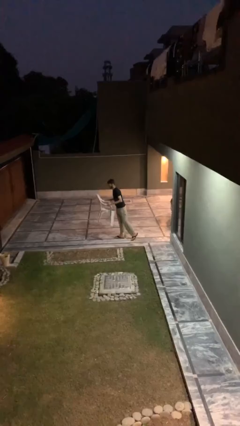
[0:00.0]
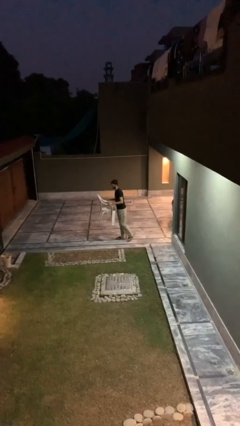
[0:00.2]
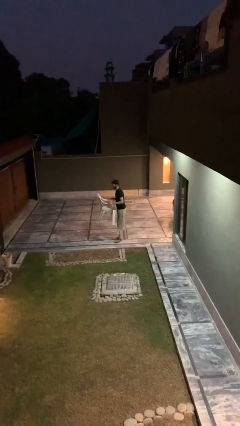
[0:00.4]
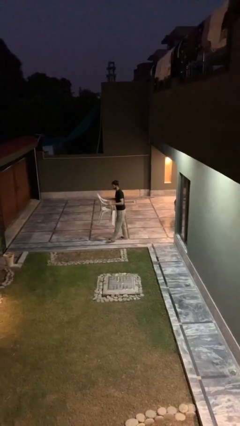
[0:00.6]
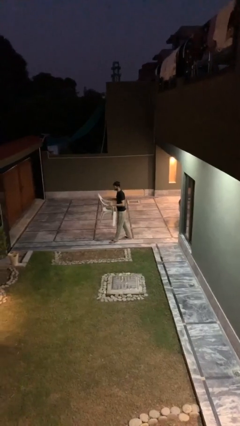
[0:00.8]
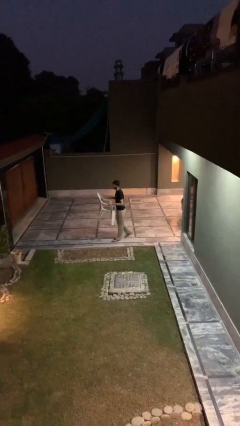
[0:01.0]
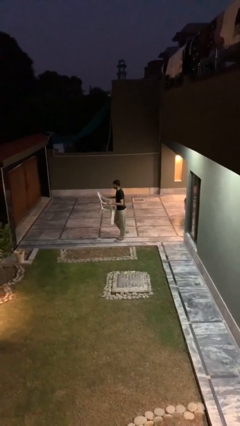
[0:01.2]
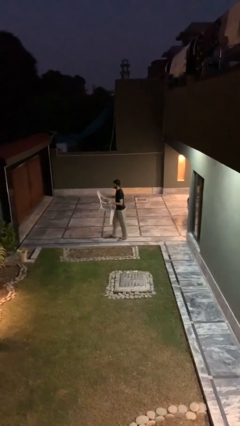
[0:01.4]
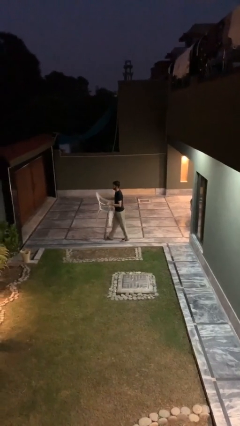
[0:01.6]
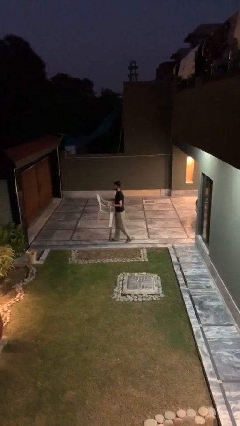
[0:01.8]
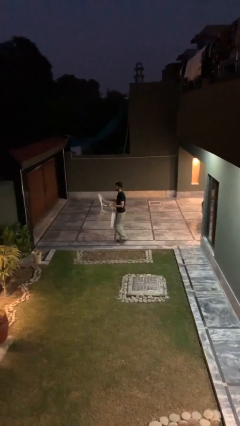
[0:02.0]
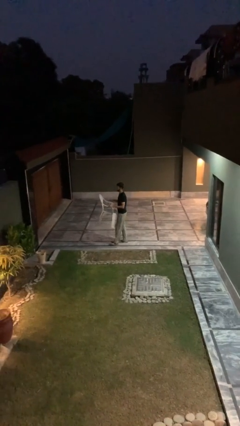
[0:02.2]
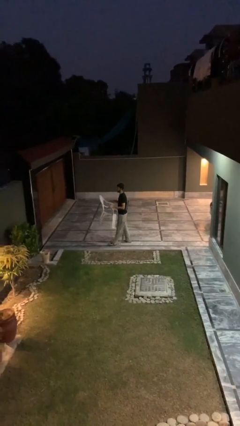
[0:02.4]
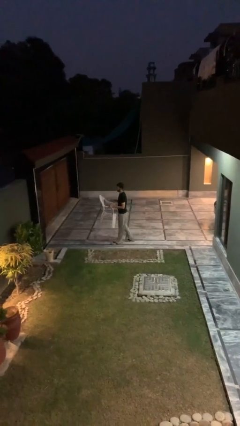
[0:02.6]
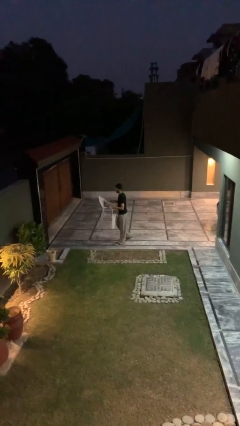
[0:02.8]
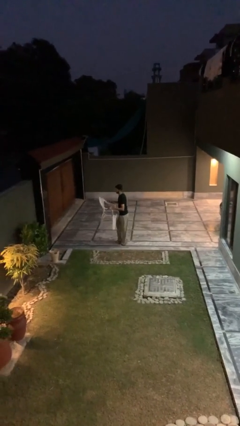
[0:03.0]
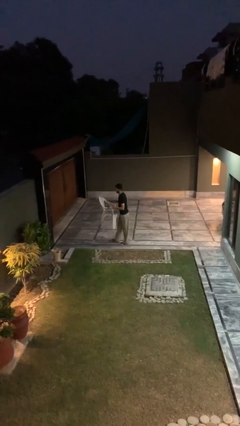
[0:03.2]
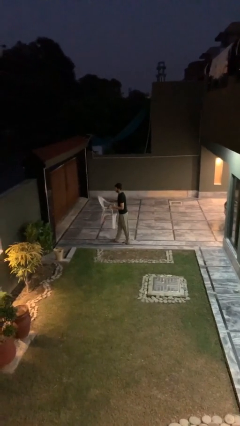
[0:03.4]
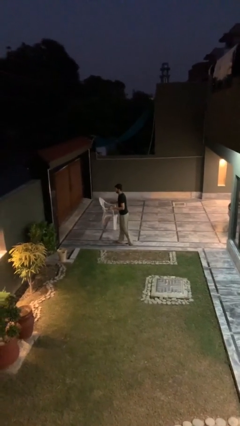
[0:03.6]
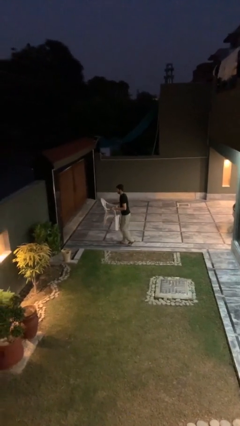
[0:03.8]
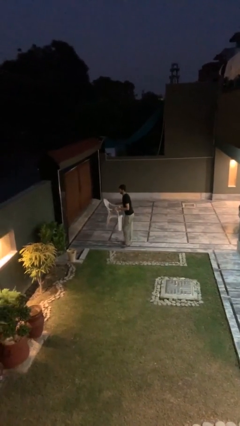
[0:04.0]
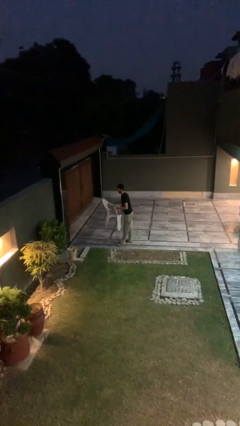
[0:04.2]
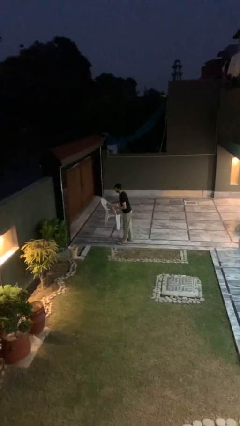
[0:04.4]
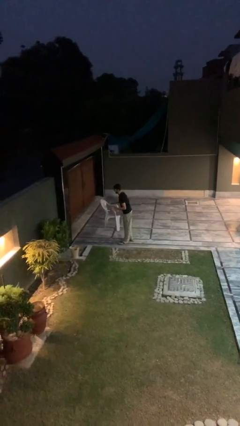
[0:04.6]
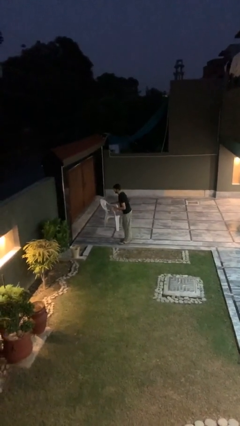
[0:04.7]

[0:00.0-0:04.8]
person carries heavy object

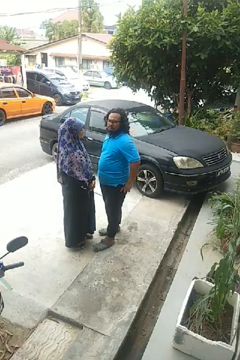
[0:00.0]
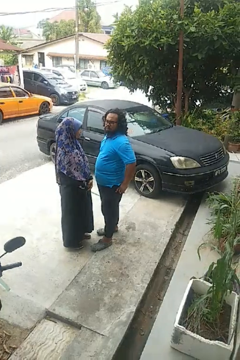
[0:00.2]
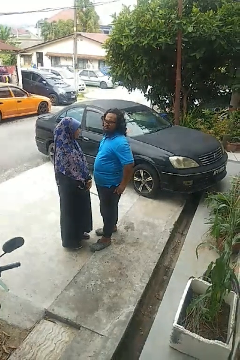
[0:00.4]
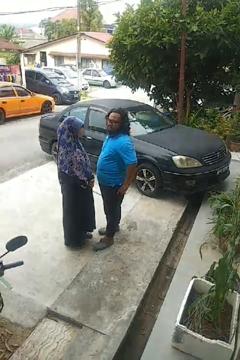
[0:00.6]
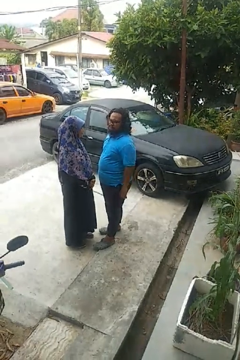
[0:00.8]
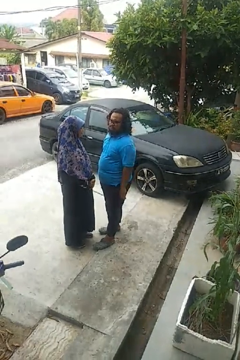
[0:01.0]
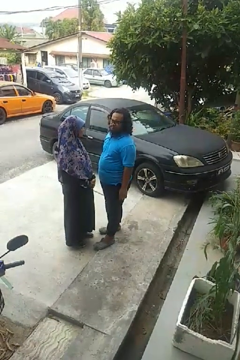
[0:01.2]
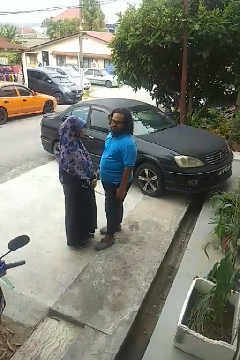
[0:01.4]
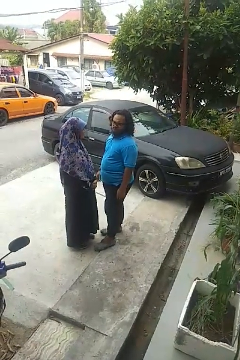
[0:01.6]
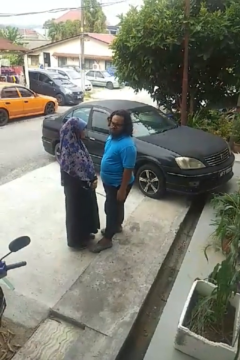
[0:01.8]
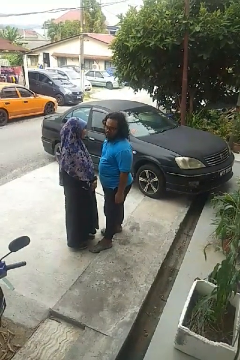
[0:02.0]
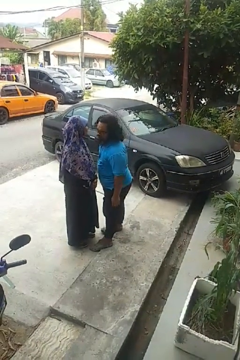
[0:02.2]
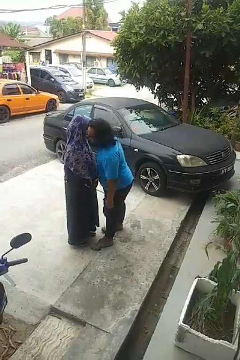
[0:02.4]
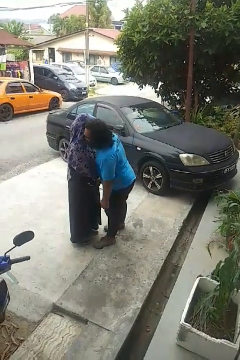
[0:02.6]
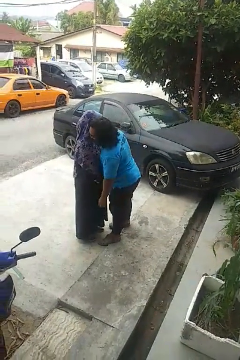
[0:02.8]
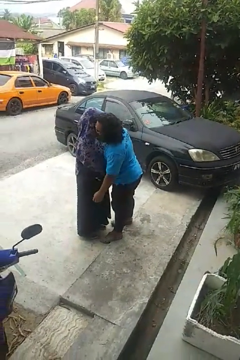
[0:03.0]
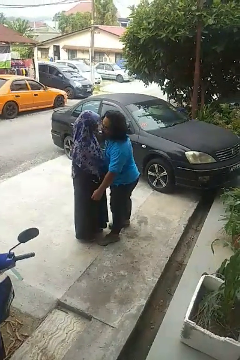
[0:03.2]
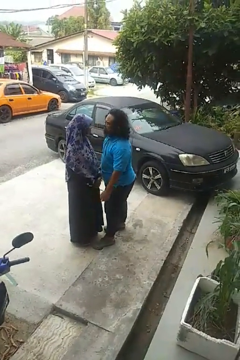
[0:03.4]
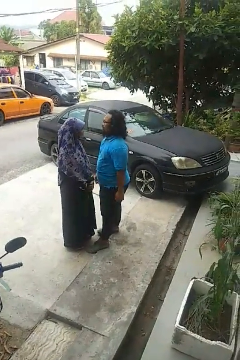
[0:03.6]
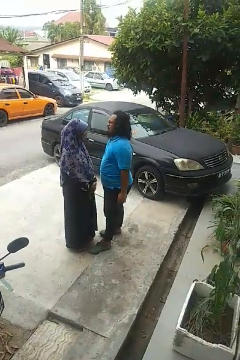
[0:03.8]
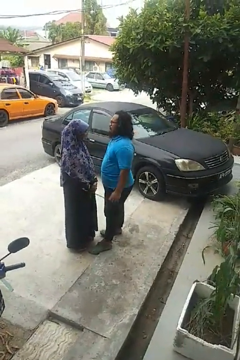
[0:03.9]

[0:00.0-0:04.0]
person kisses cheek of person

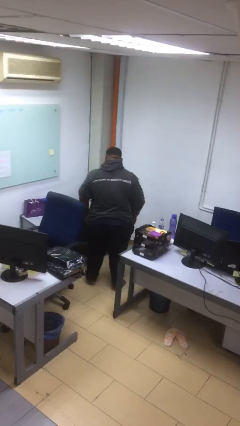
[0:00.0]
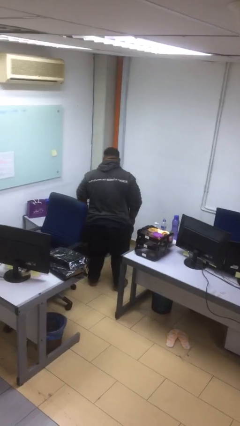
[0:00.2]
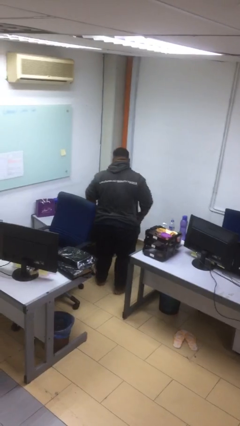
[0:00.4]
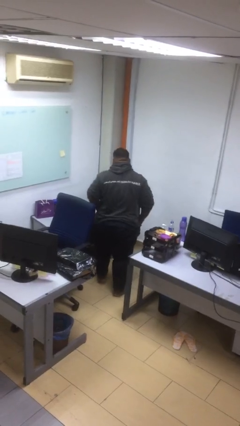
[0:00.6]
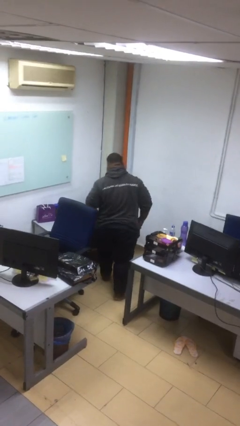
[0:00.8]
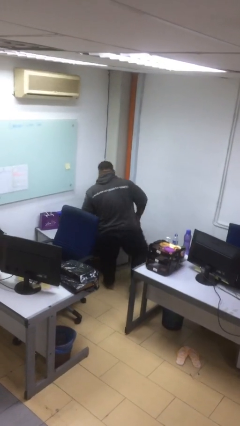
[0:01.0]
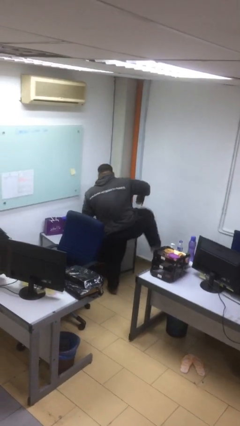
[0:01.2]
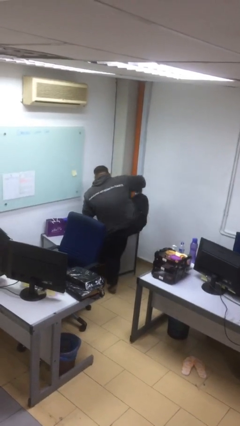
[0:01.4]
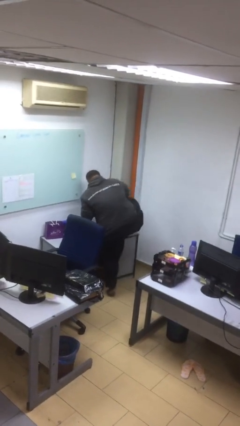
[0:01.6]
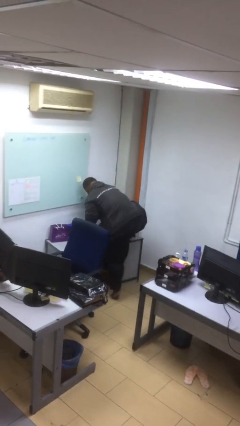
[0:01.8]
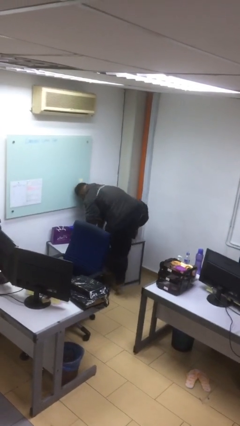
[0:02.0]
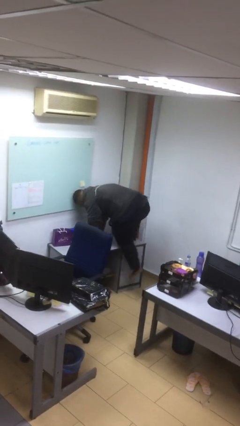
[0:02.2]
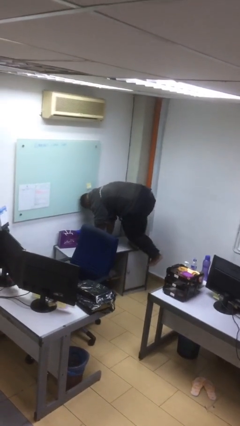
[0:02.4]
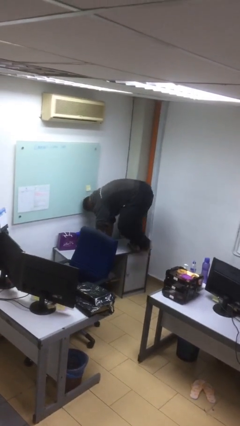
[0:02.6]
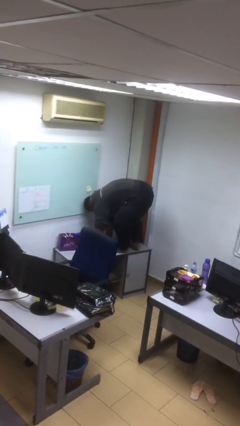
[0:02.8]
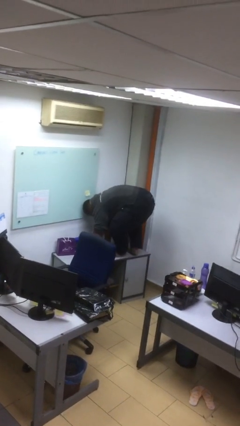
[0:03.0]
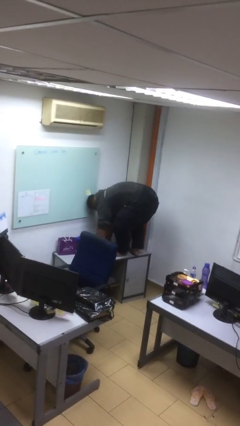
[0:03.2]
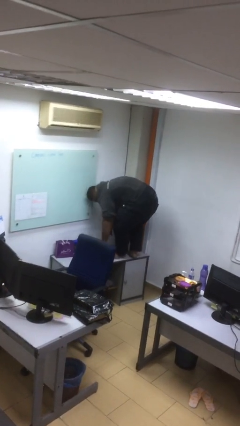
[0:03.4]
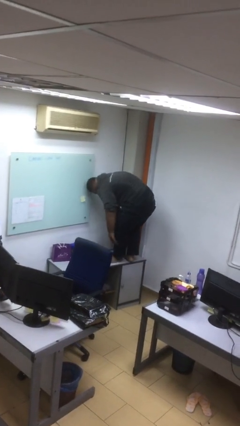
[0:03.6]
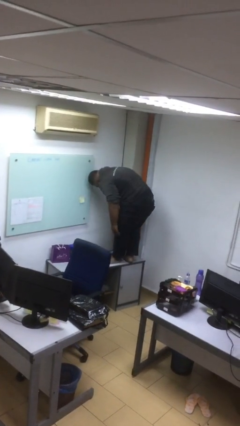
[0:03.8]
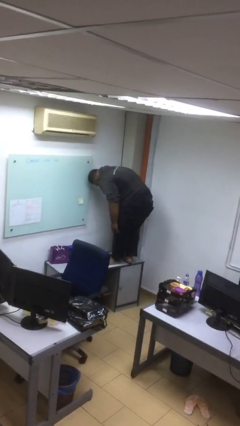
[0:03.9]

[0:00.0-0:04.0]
person climbs on table

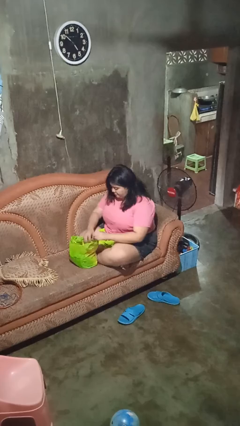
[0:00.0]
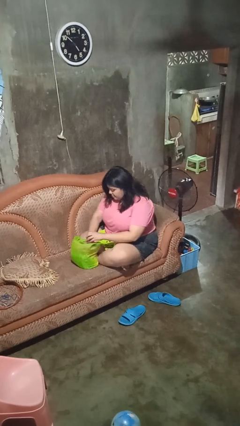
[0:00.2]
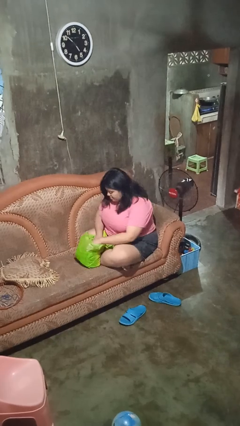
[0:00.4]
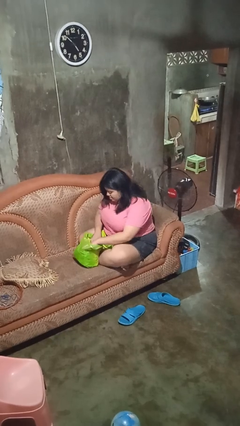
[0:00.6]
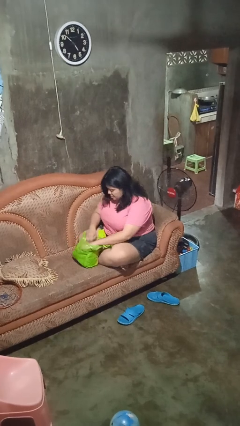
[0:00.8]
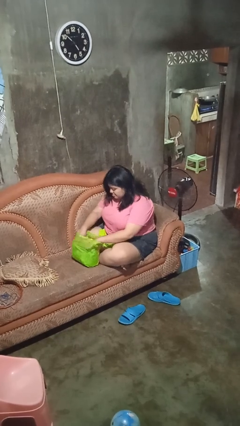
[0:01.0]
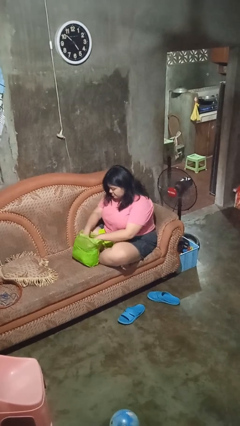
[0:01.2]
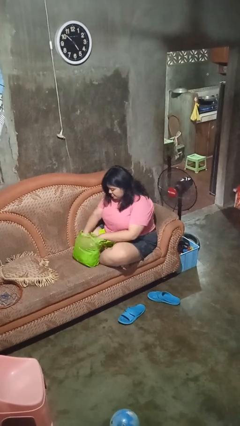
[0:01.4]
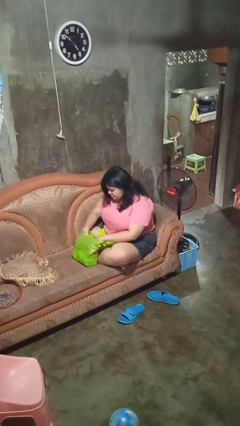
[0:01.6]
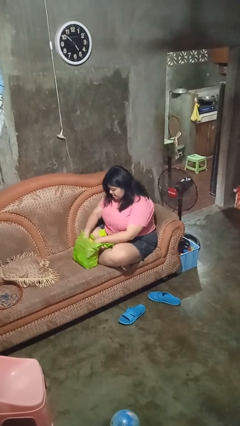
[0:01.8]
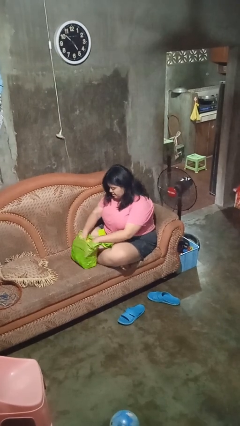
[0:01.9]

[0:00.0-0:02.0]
person searches in bag

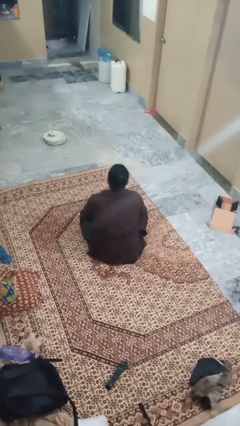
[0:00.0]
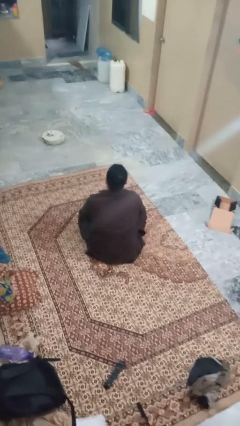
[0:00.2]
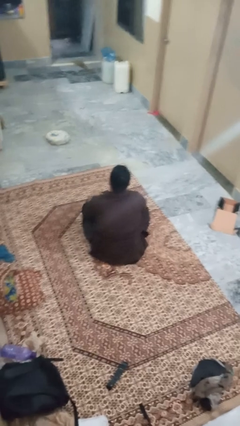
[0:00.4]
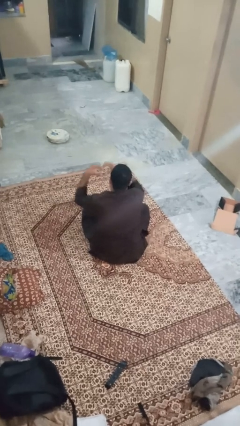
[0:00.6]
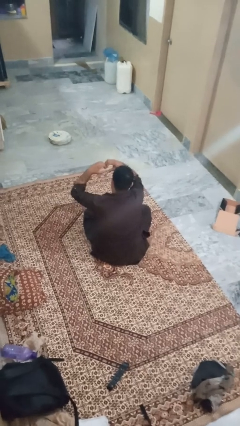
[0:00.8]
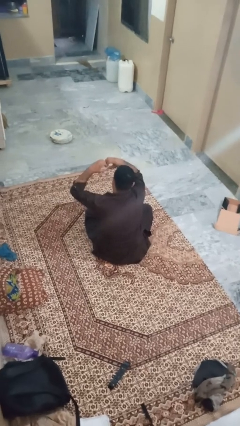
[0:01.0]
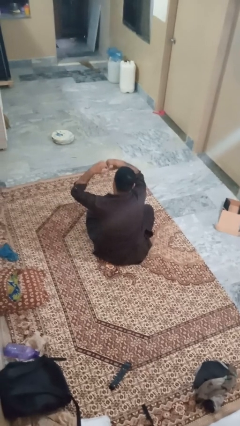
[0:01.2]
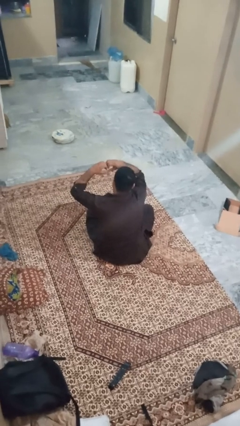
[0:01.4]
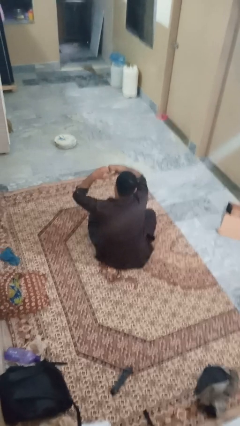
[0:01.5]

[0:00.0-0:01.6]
person gestures heart

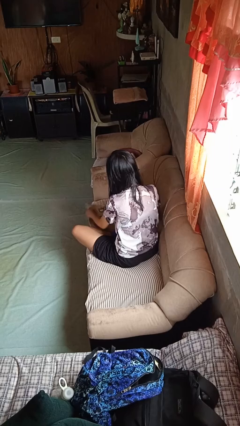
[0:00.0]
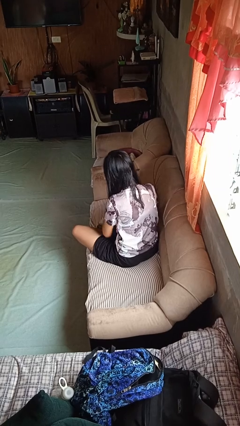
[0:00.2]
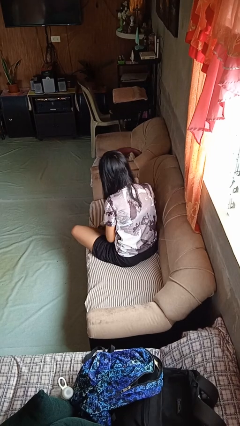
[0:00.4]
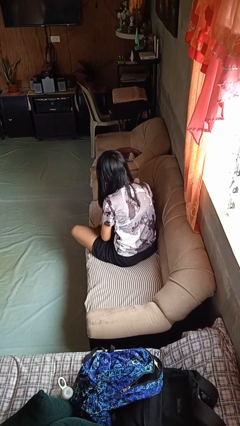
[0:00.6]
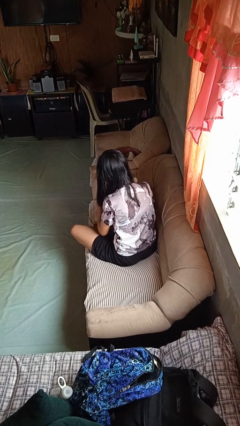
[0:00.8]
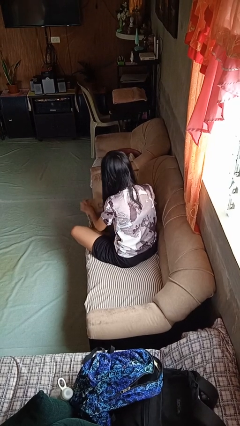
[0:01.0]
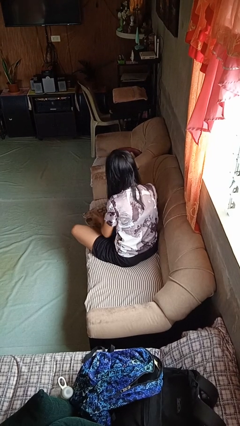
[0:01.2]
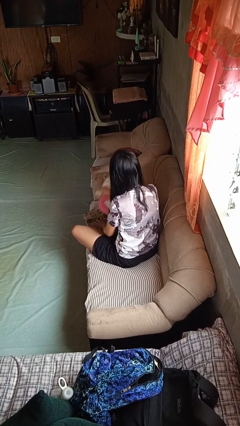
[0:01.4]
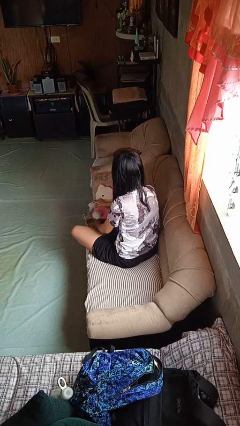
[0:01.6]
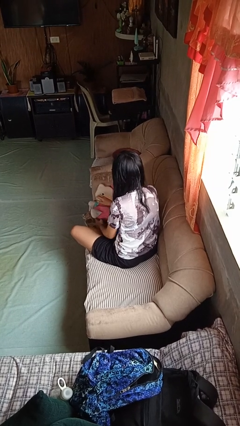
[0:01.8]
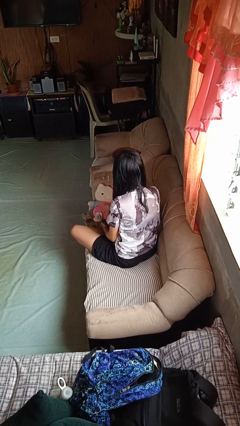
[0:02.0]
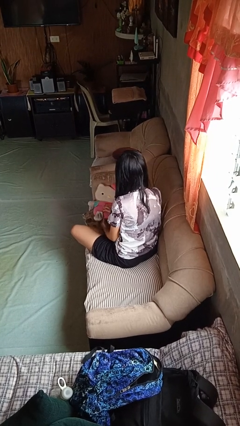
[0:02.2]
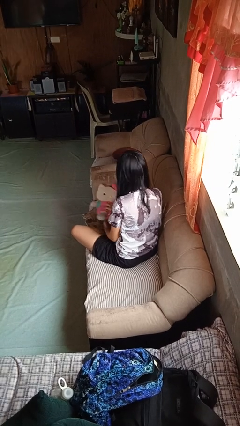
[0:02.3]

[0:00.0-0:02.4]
person searches in couch
